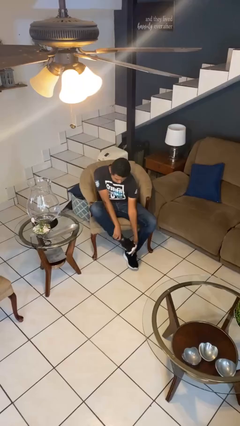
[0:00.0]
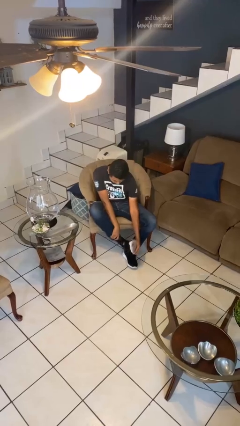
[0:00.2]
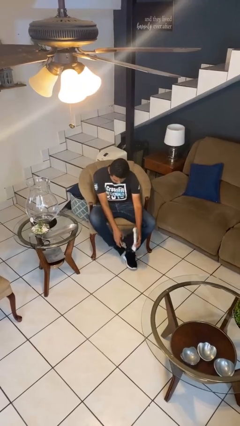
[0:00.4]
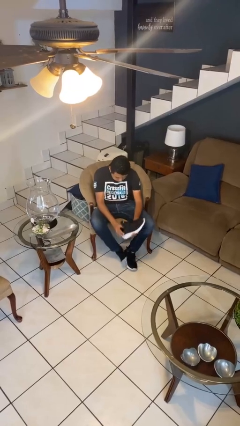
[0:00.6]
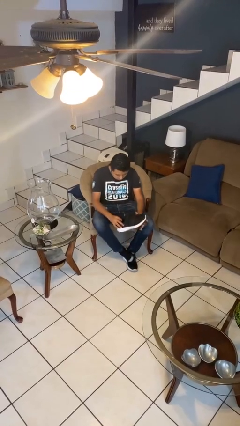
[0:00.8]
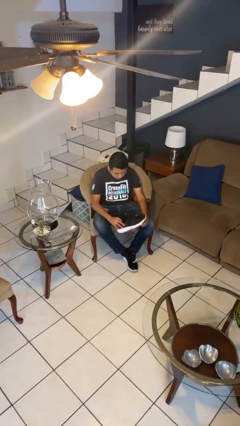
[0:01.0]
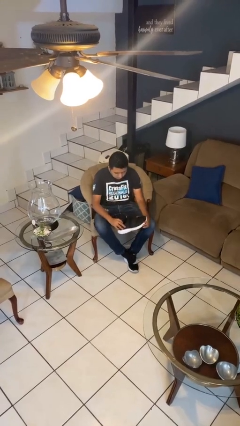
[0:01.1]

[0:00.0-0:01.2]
person takes off headphones

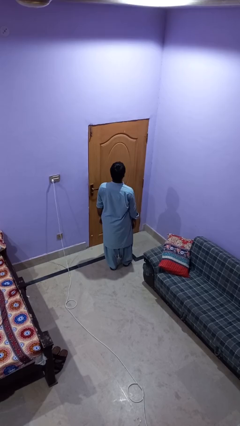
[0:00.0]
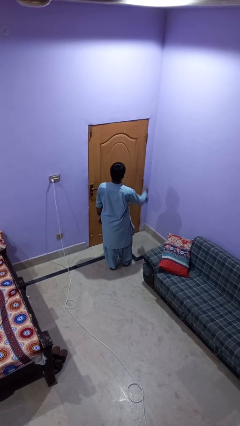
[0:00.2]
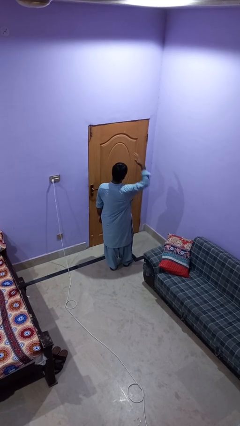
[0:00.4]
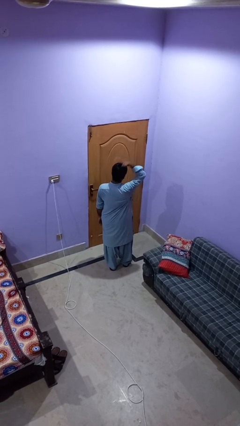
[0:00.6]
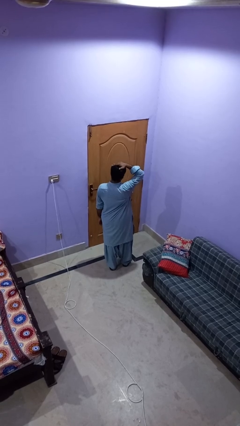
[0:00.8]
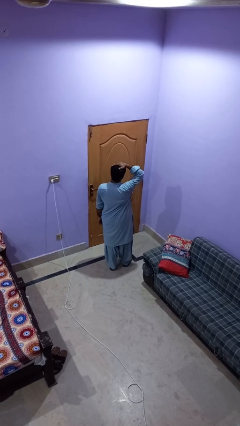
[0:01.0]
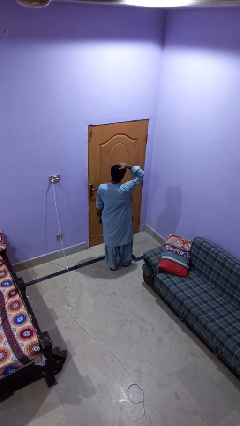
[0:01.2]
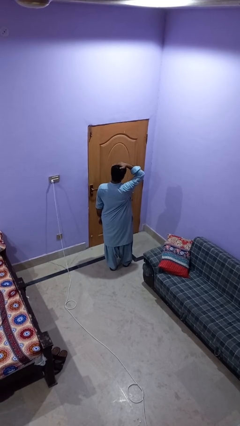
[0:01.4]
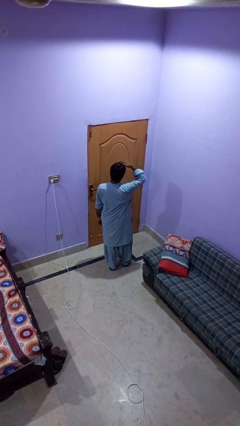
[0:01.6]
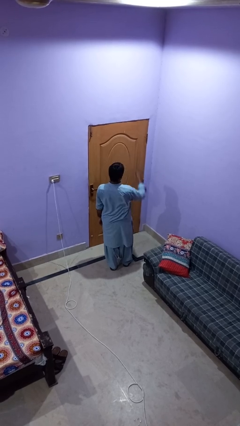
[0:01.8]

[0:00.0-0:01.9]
person pats head

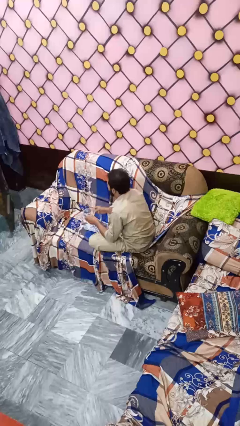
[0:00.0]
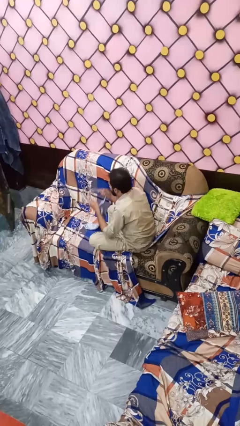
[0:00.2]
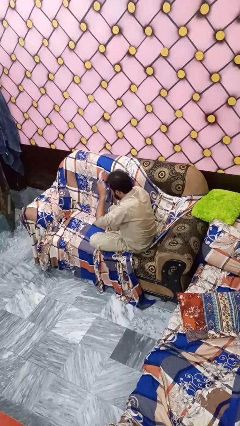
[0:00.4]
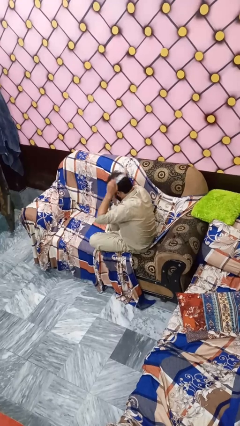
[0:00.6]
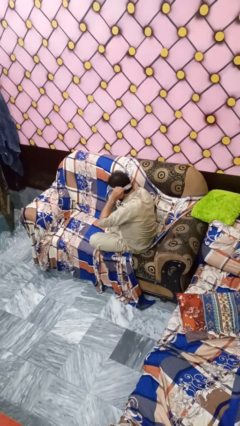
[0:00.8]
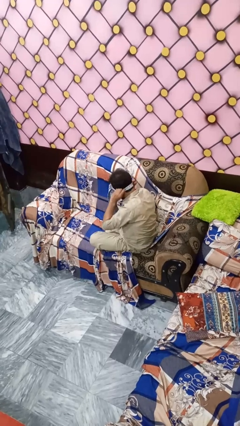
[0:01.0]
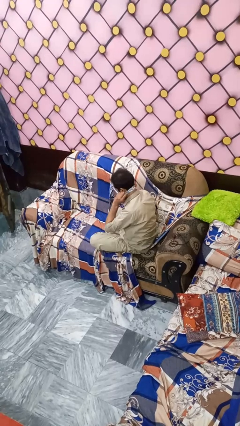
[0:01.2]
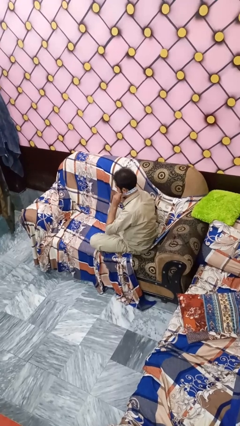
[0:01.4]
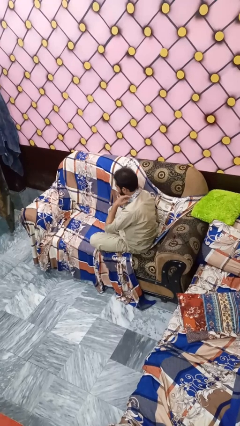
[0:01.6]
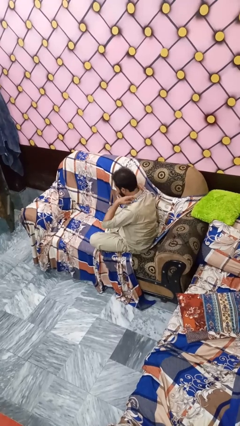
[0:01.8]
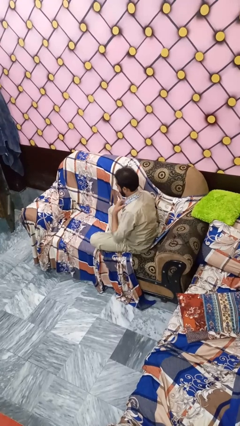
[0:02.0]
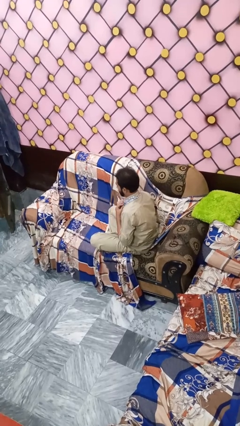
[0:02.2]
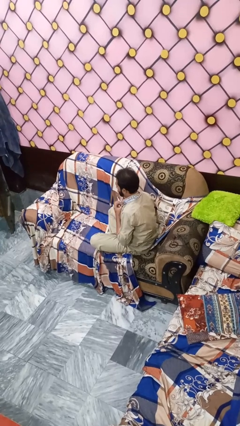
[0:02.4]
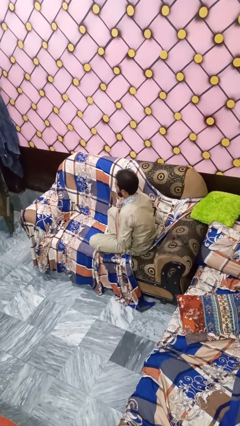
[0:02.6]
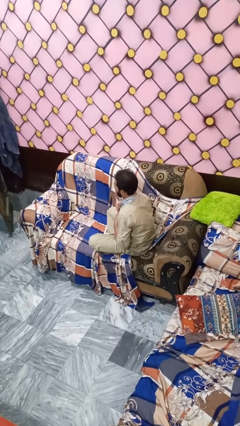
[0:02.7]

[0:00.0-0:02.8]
person puts on necktie

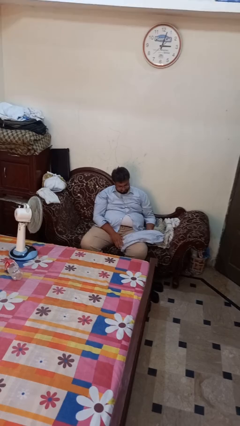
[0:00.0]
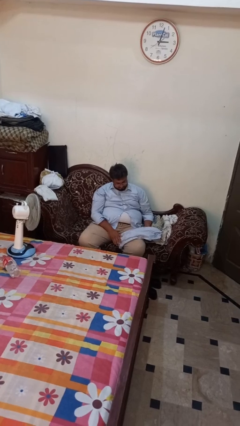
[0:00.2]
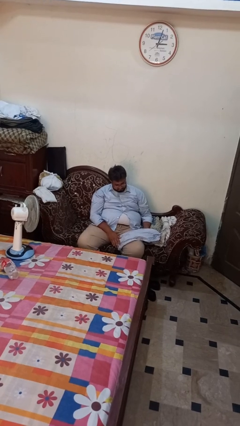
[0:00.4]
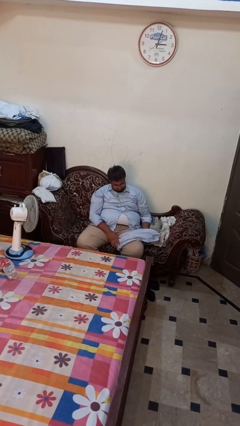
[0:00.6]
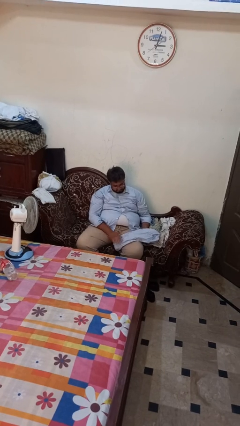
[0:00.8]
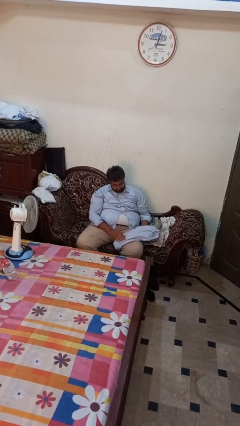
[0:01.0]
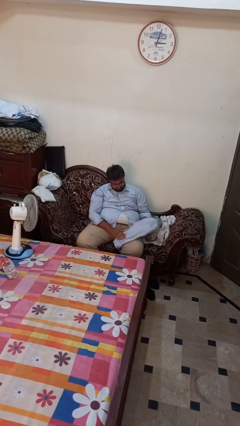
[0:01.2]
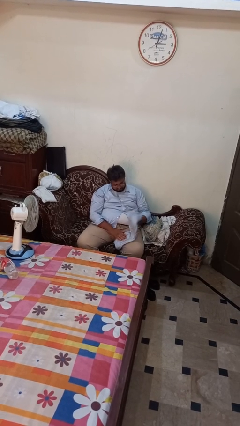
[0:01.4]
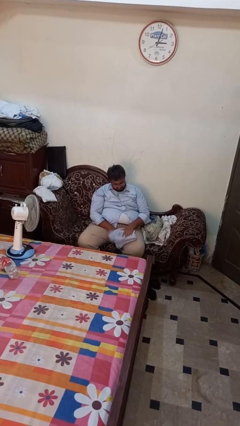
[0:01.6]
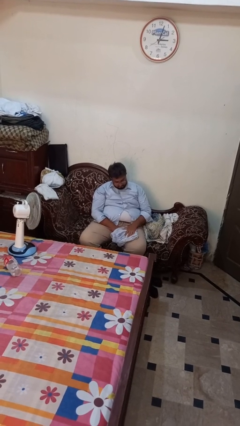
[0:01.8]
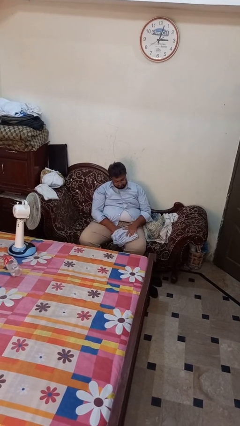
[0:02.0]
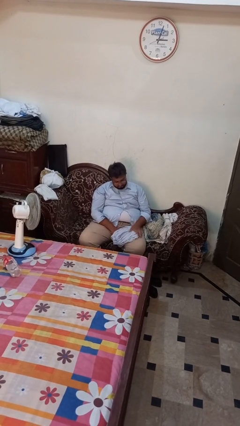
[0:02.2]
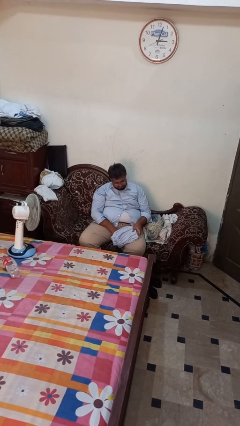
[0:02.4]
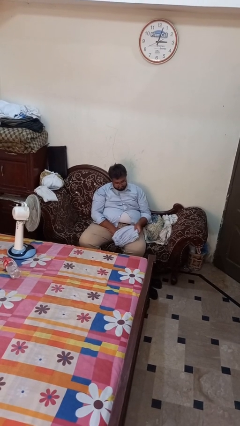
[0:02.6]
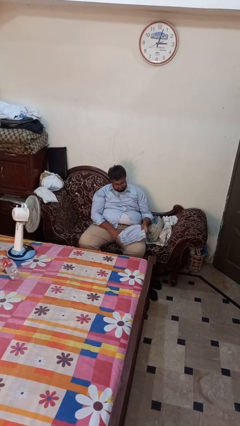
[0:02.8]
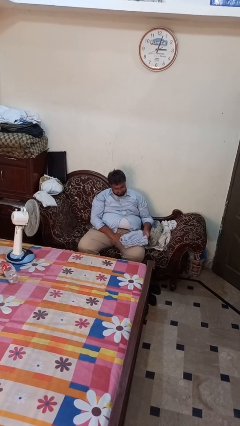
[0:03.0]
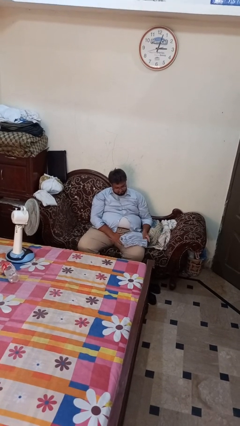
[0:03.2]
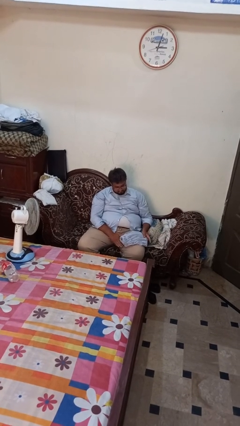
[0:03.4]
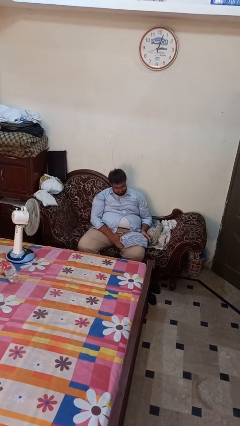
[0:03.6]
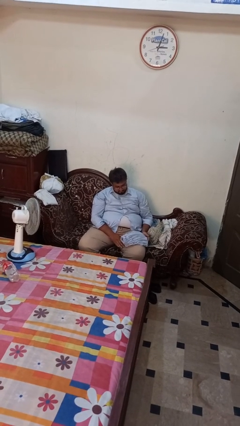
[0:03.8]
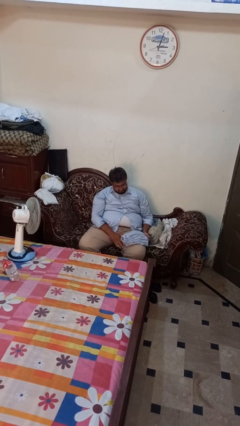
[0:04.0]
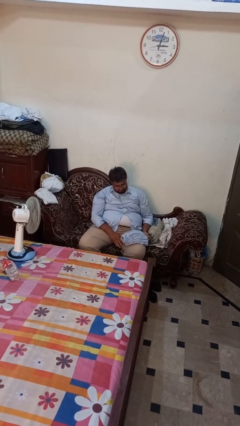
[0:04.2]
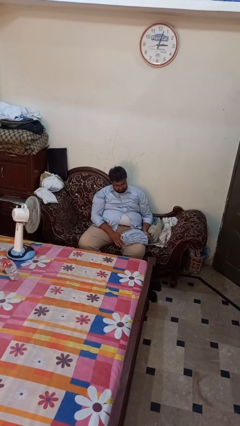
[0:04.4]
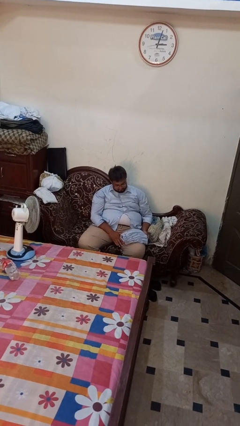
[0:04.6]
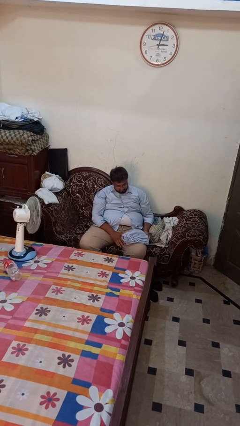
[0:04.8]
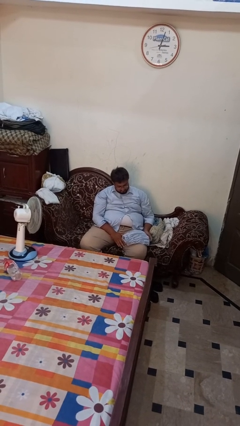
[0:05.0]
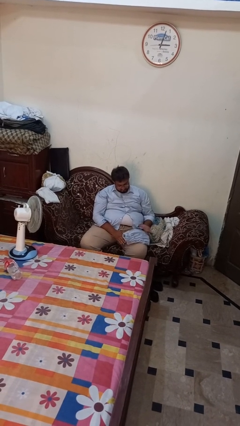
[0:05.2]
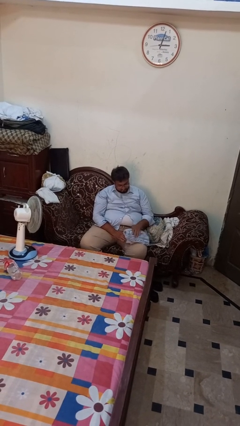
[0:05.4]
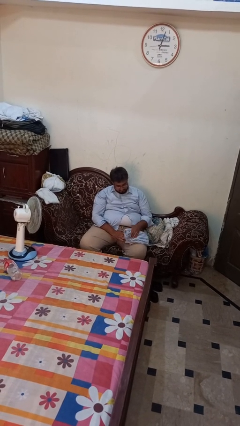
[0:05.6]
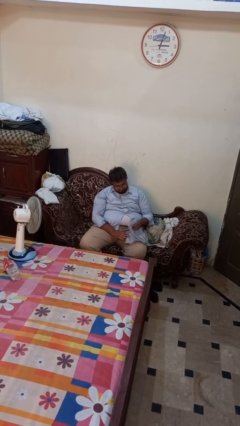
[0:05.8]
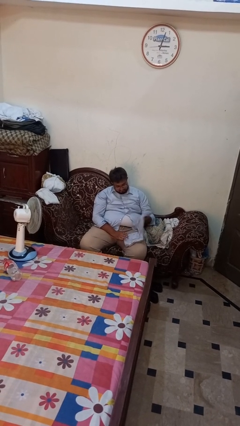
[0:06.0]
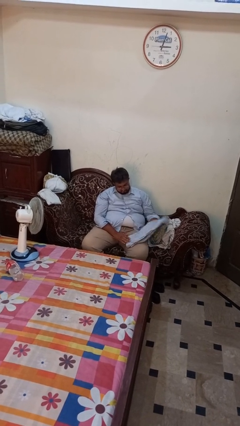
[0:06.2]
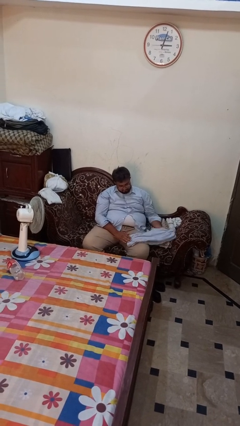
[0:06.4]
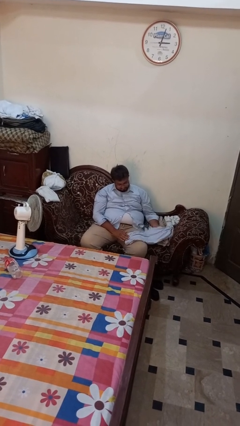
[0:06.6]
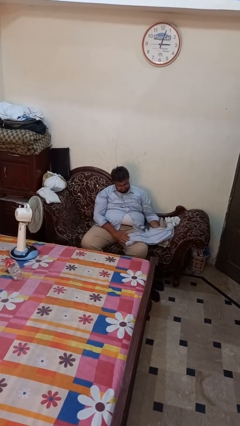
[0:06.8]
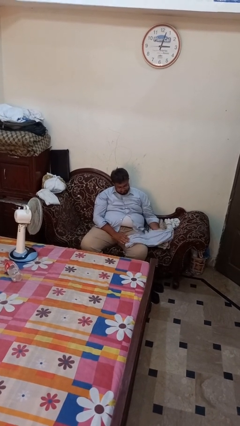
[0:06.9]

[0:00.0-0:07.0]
person folds pants

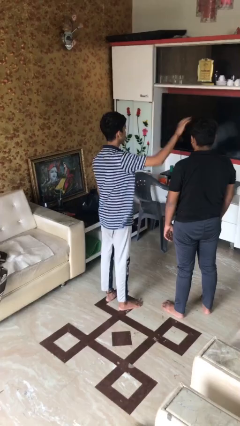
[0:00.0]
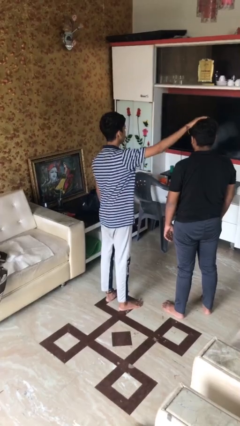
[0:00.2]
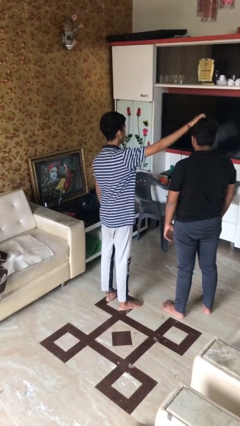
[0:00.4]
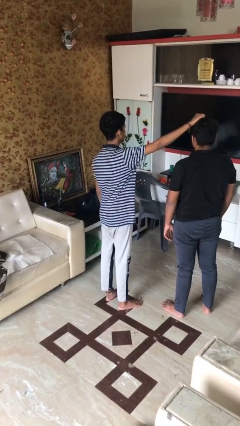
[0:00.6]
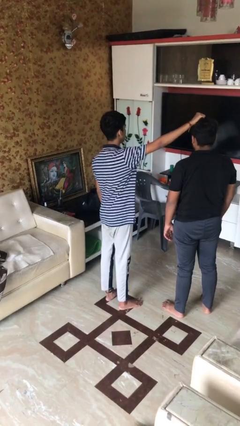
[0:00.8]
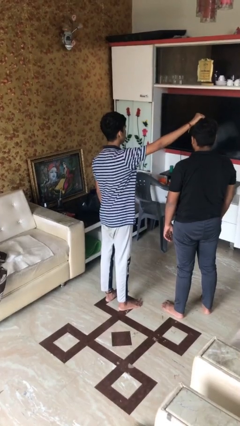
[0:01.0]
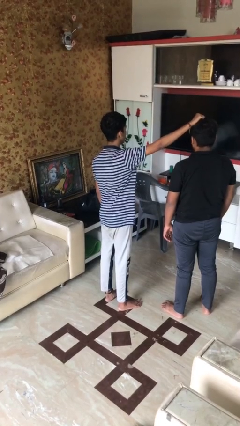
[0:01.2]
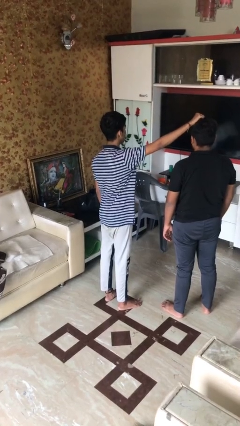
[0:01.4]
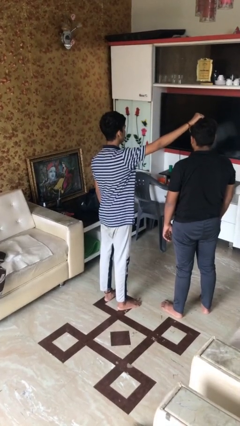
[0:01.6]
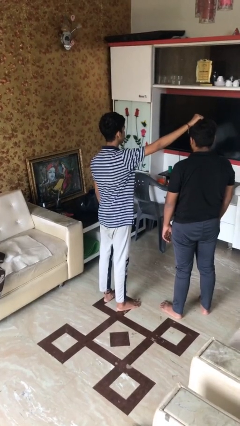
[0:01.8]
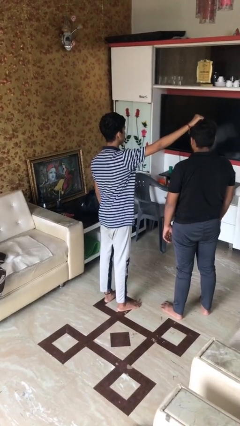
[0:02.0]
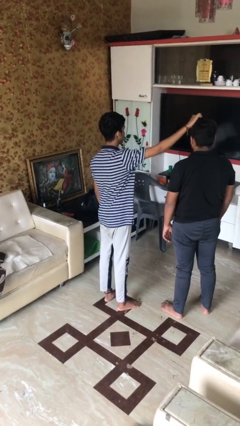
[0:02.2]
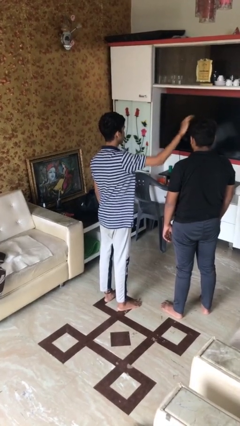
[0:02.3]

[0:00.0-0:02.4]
person grabs person by hair

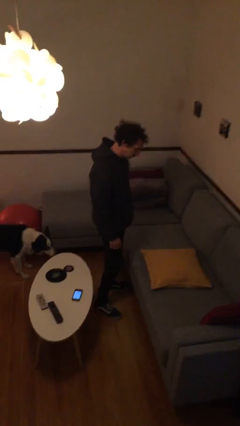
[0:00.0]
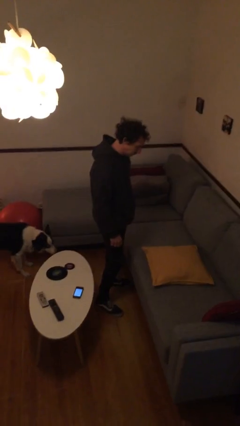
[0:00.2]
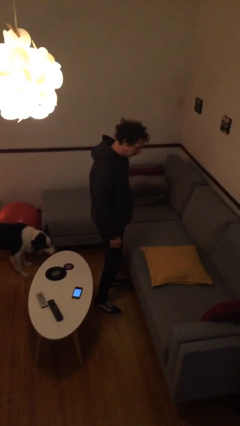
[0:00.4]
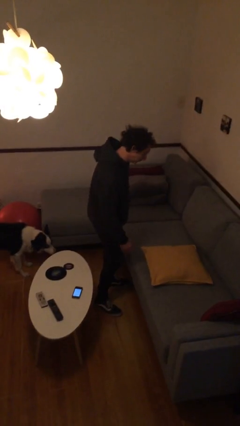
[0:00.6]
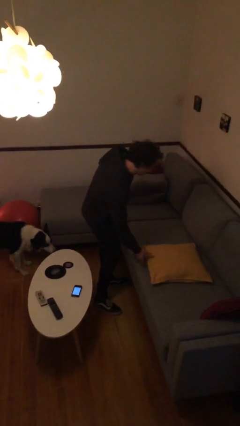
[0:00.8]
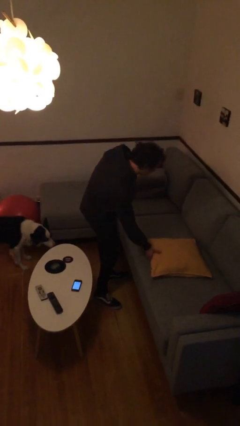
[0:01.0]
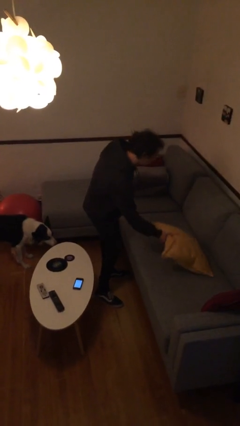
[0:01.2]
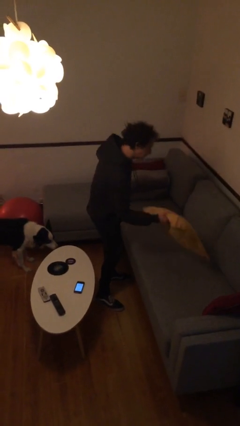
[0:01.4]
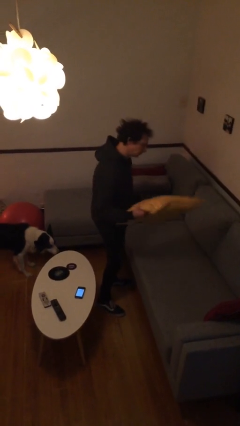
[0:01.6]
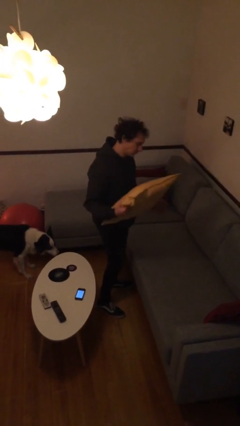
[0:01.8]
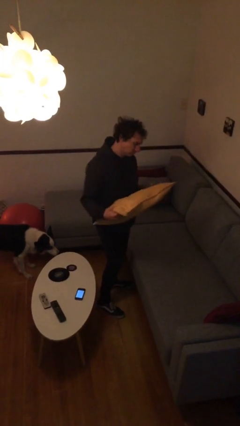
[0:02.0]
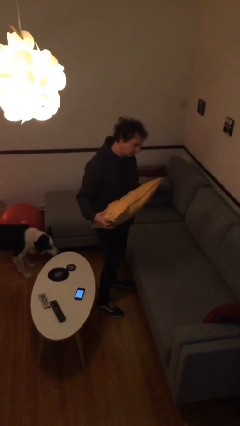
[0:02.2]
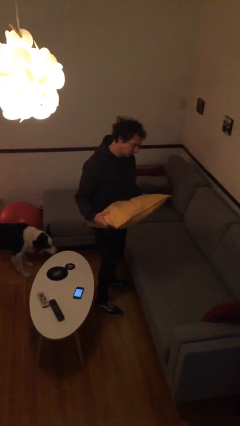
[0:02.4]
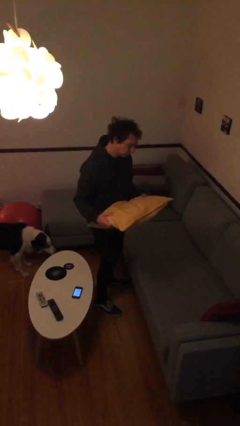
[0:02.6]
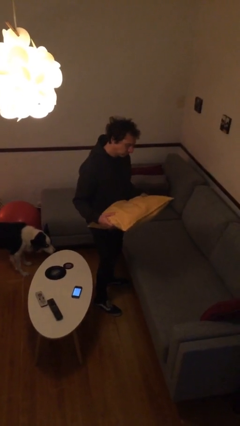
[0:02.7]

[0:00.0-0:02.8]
person picks up object from couch
